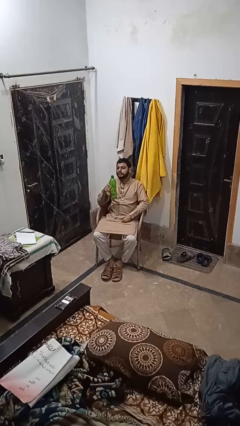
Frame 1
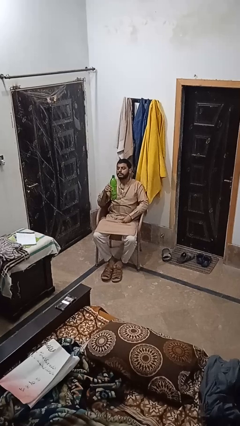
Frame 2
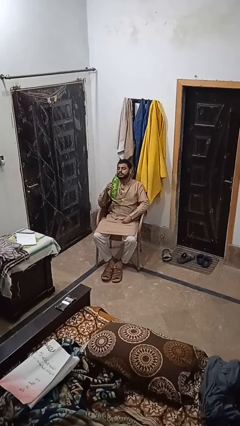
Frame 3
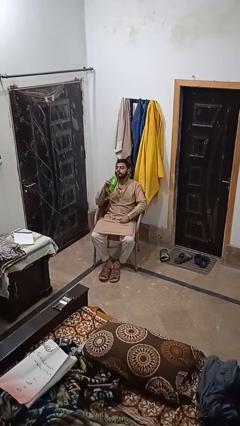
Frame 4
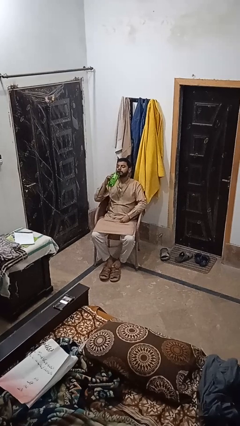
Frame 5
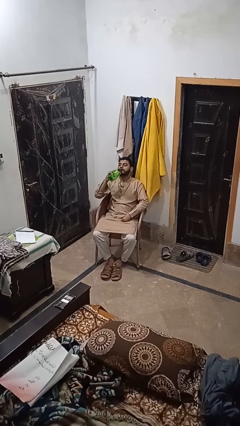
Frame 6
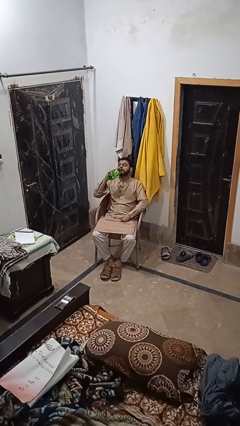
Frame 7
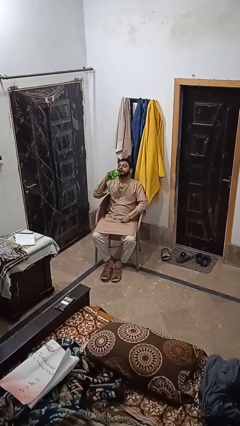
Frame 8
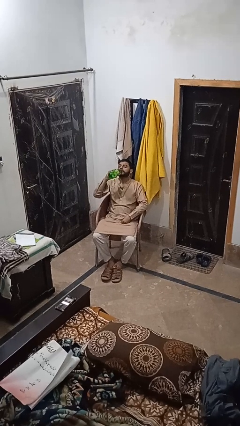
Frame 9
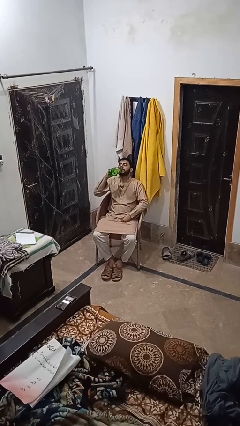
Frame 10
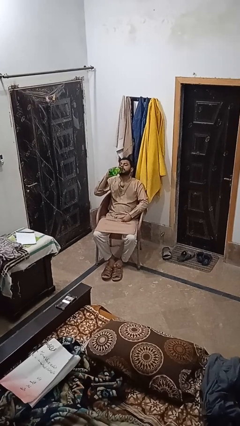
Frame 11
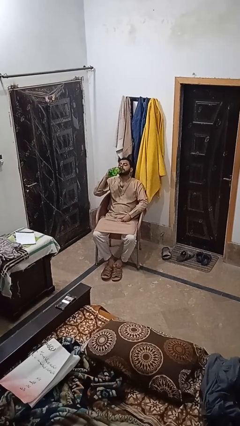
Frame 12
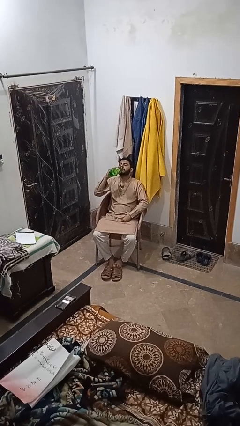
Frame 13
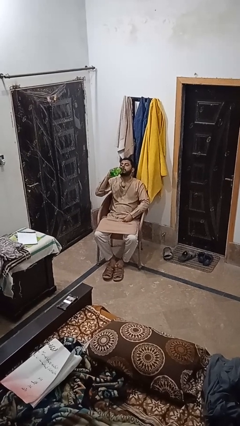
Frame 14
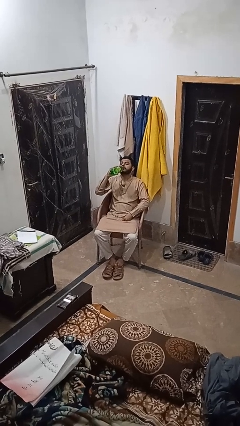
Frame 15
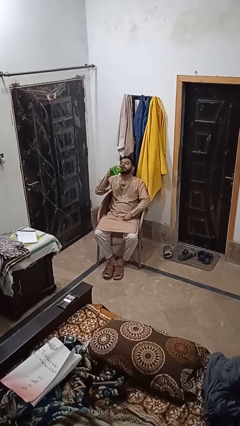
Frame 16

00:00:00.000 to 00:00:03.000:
person drinks from bottle

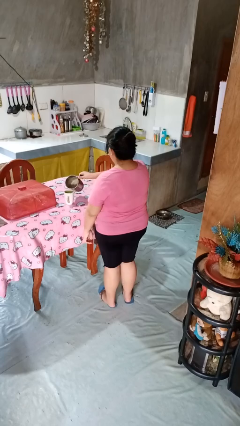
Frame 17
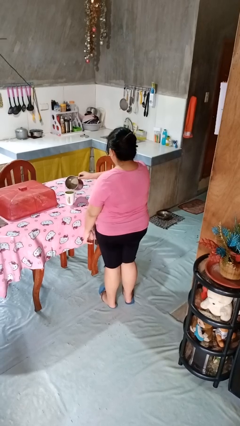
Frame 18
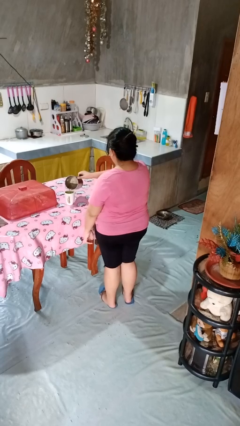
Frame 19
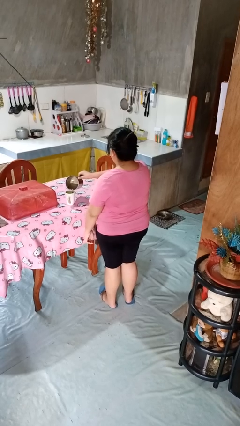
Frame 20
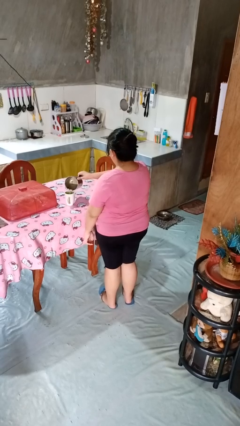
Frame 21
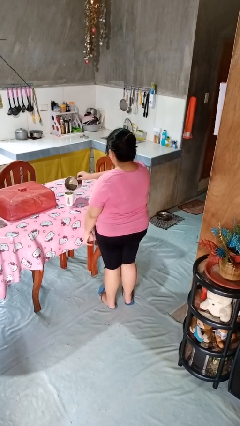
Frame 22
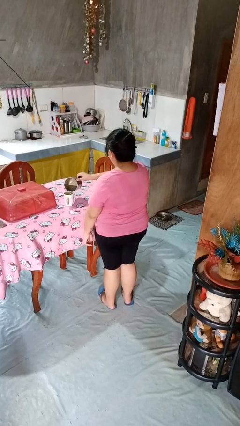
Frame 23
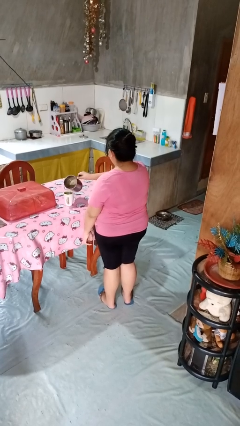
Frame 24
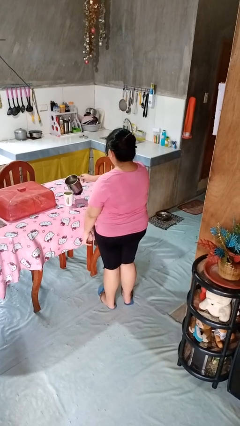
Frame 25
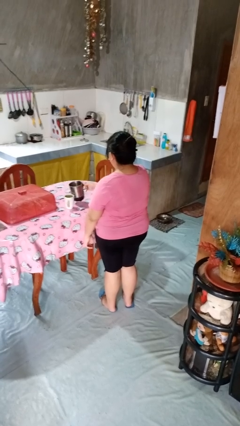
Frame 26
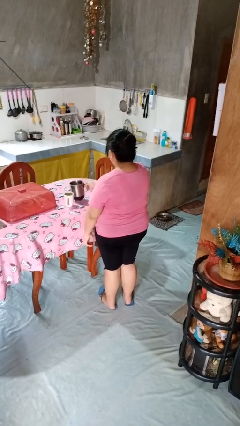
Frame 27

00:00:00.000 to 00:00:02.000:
person pours coffee into mug

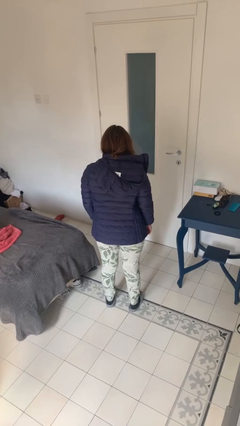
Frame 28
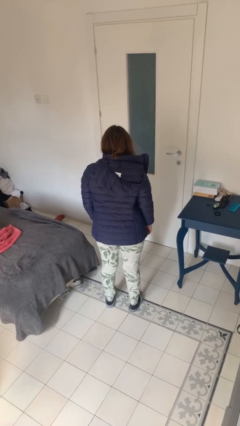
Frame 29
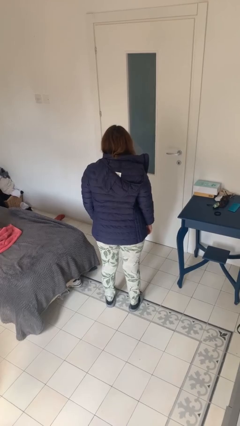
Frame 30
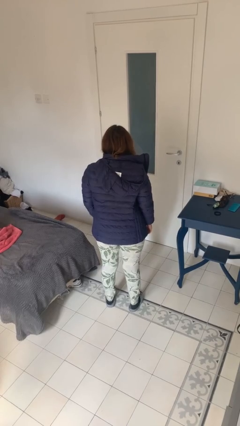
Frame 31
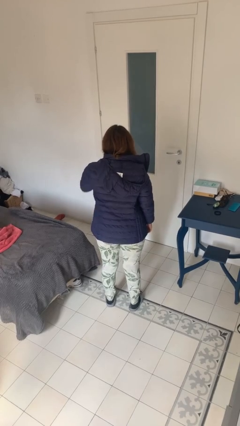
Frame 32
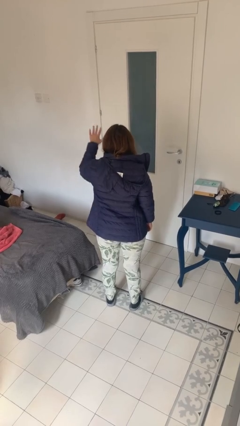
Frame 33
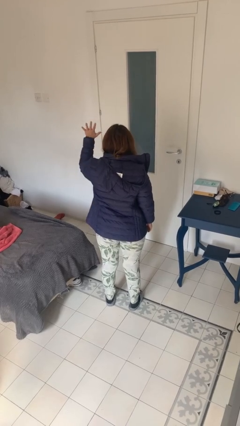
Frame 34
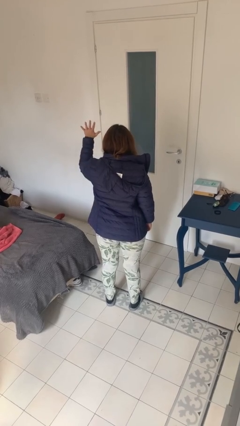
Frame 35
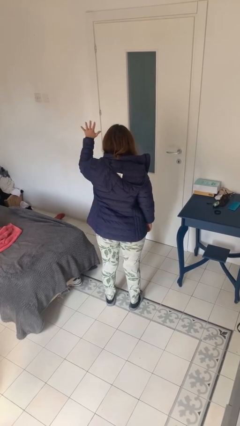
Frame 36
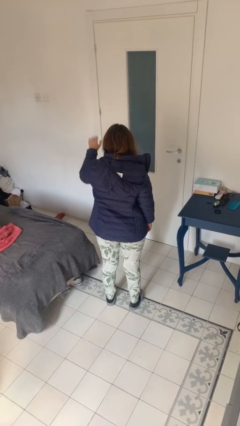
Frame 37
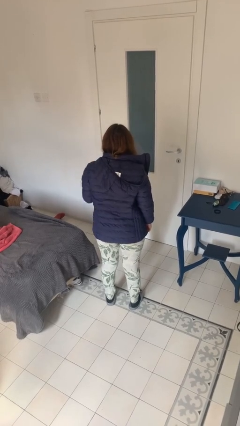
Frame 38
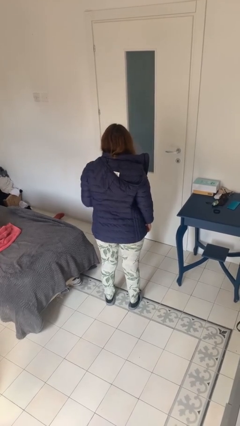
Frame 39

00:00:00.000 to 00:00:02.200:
person gestures number five

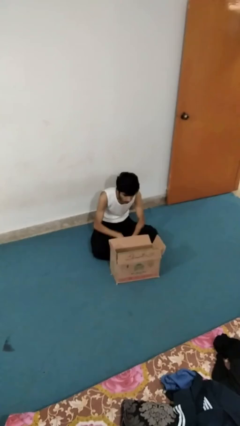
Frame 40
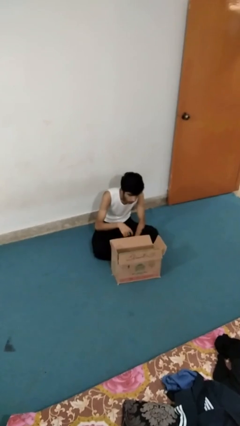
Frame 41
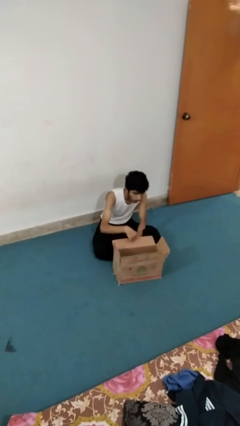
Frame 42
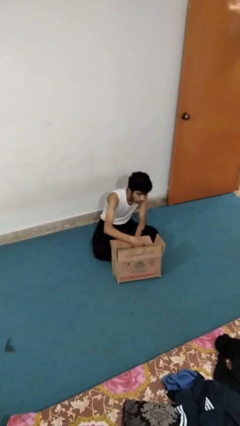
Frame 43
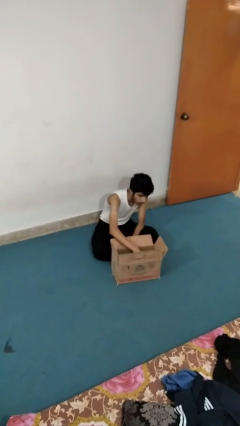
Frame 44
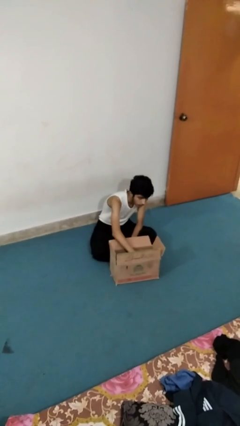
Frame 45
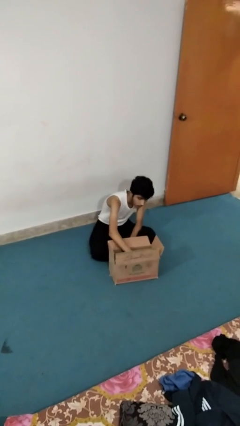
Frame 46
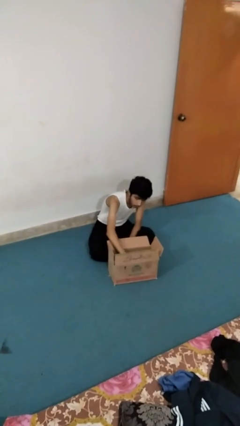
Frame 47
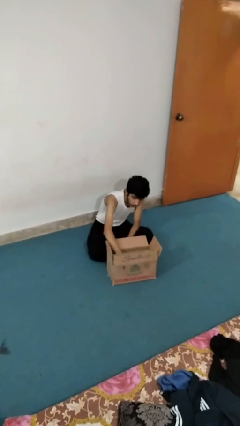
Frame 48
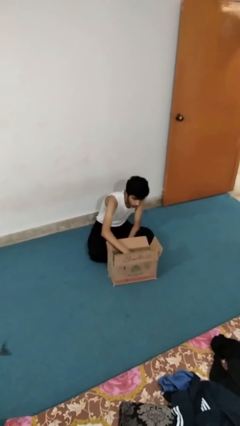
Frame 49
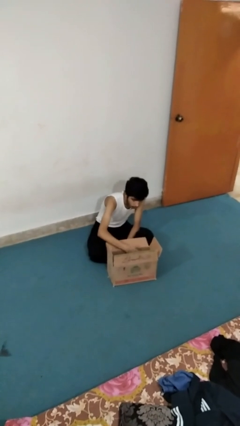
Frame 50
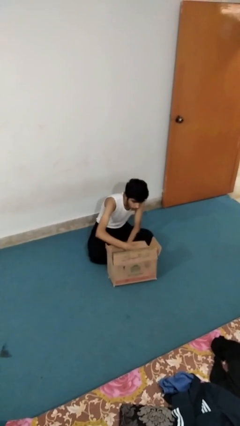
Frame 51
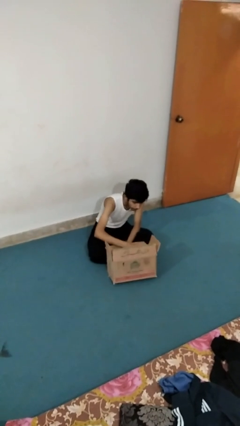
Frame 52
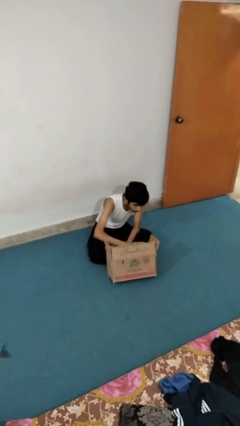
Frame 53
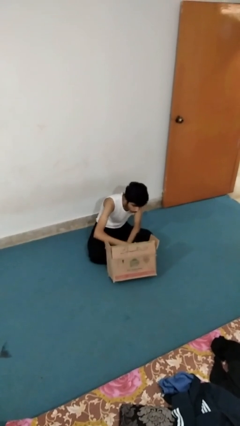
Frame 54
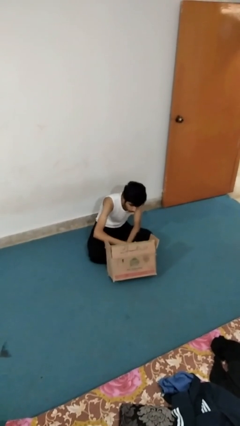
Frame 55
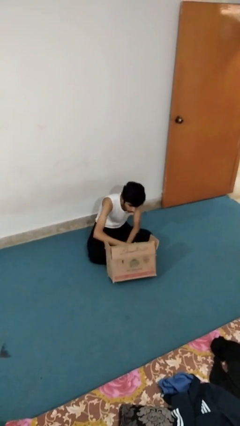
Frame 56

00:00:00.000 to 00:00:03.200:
person searches in box

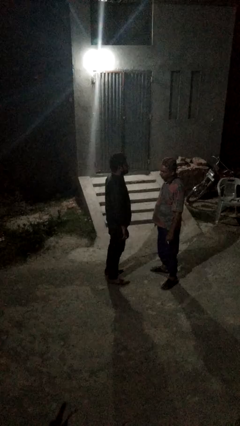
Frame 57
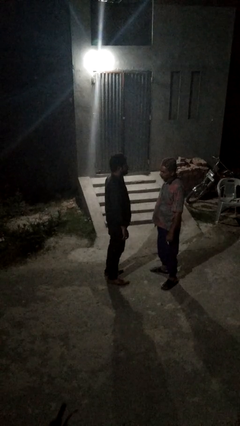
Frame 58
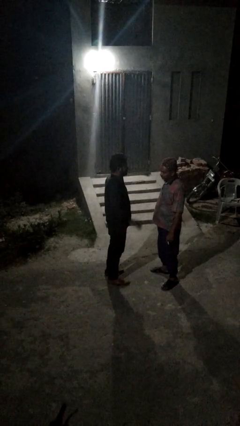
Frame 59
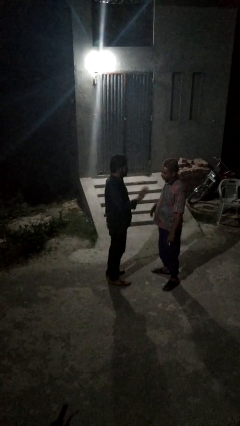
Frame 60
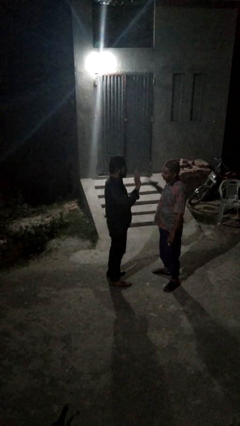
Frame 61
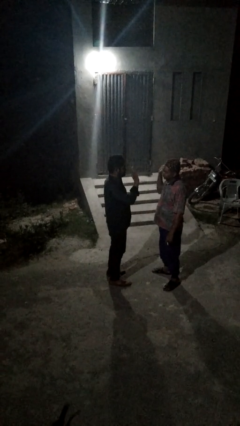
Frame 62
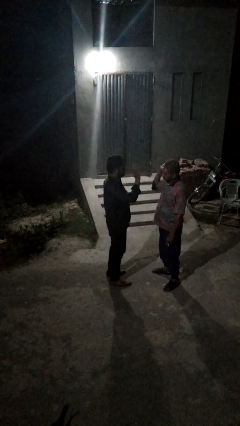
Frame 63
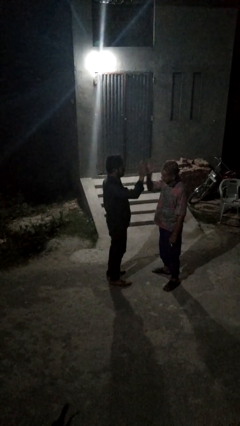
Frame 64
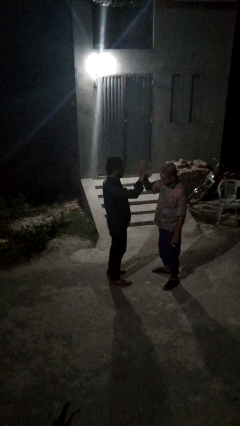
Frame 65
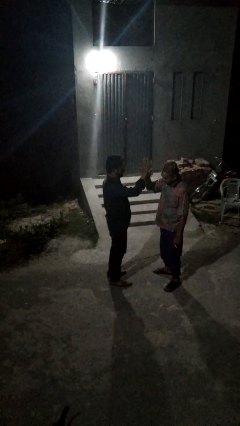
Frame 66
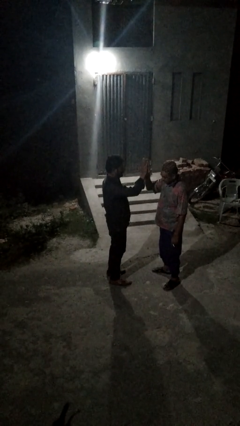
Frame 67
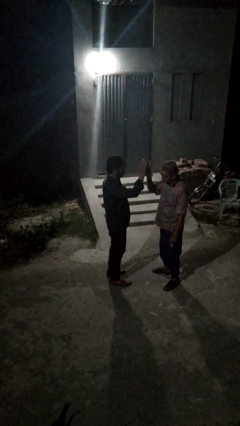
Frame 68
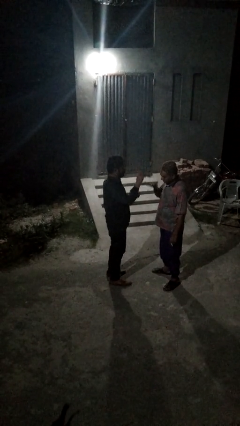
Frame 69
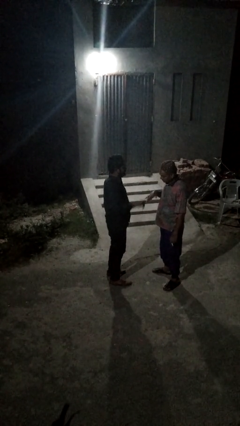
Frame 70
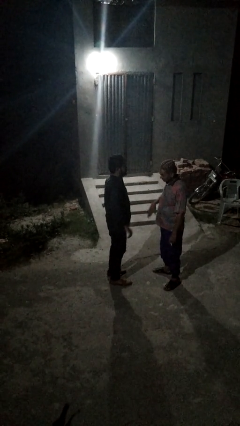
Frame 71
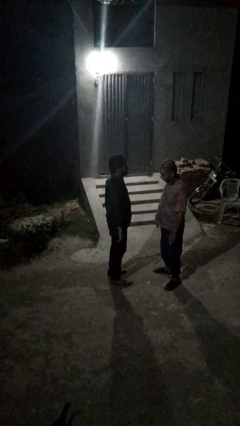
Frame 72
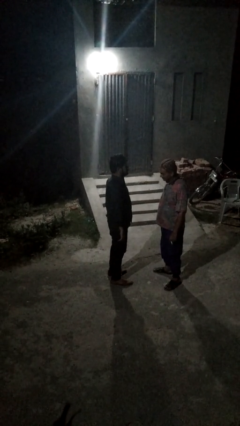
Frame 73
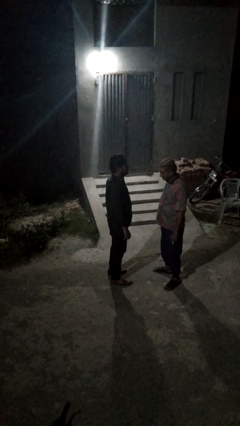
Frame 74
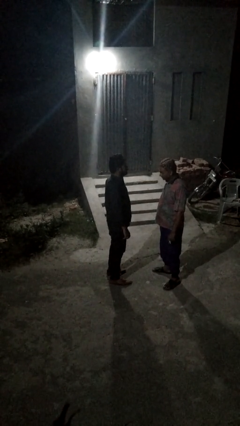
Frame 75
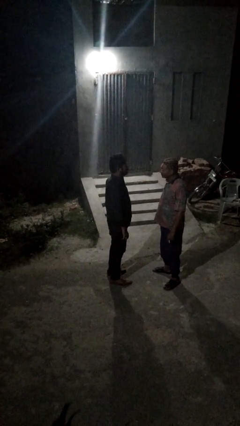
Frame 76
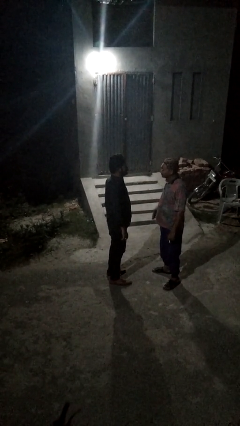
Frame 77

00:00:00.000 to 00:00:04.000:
person highfives hand

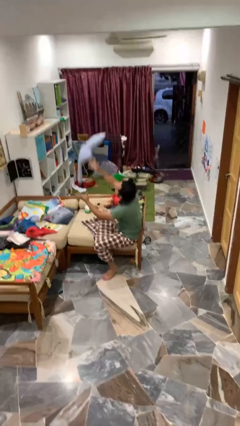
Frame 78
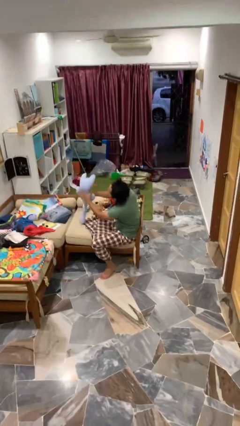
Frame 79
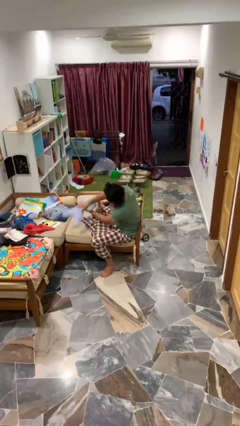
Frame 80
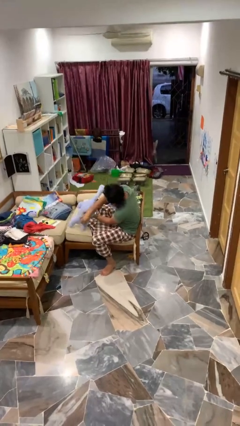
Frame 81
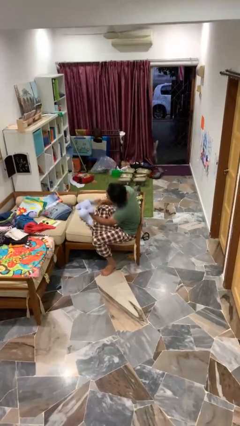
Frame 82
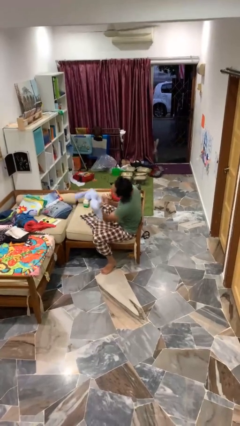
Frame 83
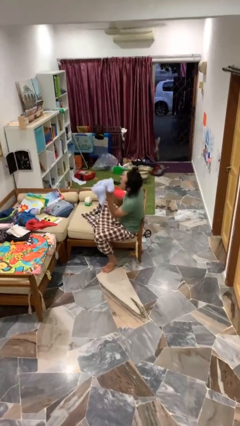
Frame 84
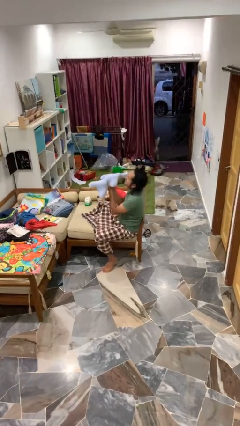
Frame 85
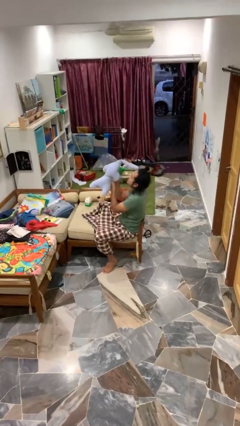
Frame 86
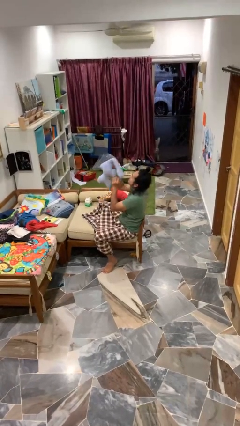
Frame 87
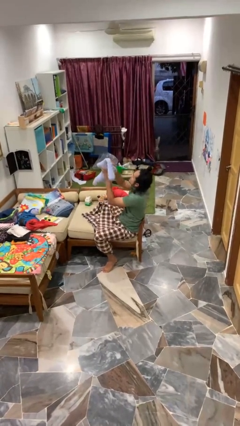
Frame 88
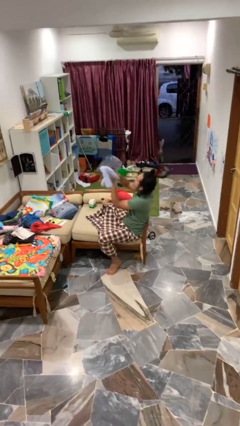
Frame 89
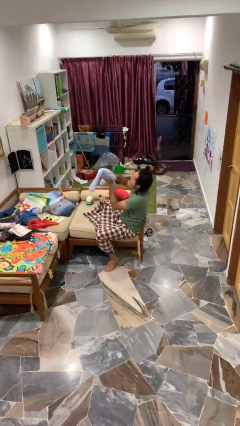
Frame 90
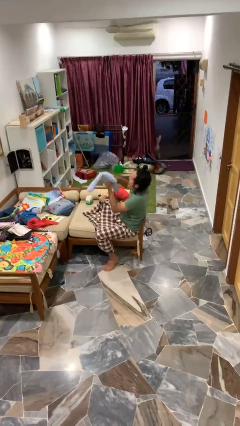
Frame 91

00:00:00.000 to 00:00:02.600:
person catches dropped object
